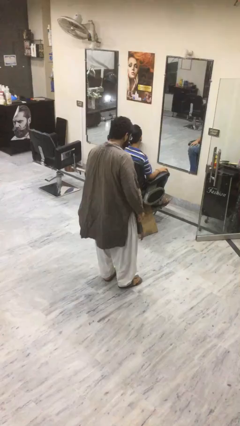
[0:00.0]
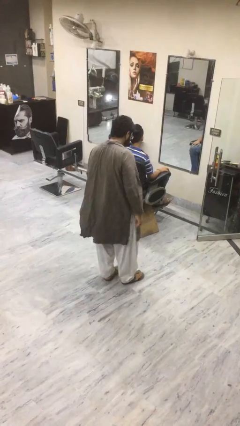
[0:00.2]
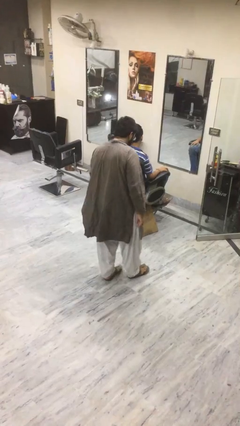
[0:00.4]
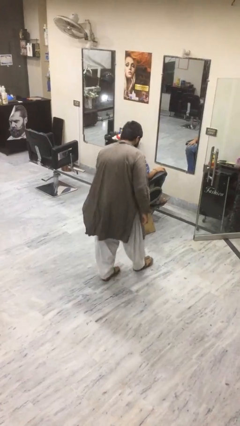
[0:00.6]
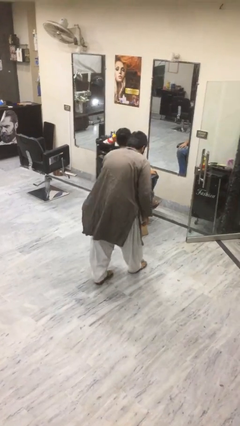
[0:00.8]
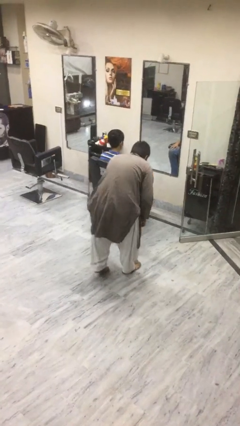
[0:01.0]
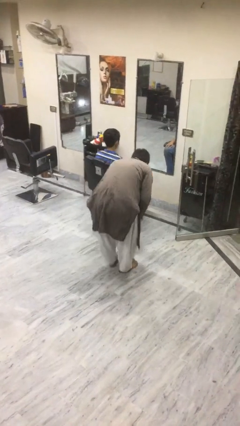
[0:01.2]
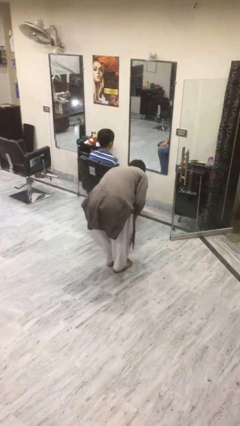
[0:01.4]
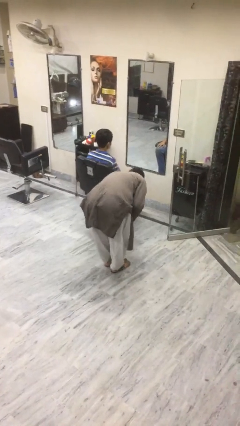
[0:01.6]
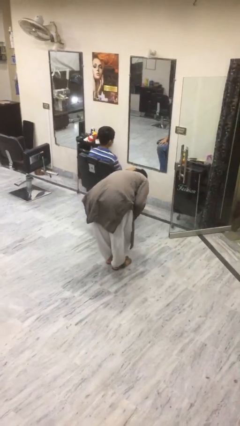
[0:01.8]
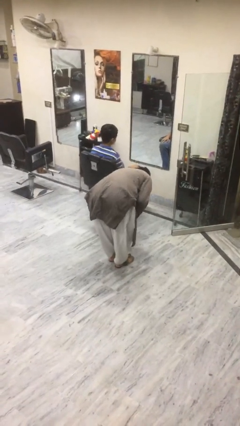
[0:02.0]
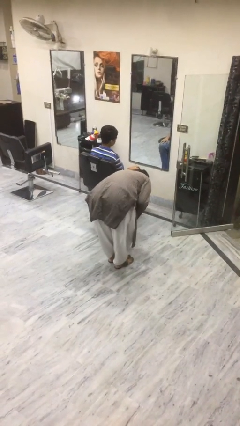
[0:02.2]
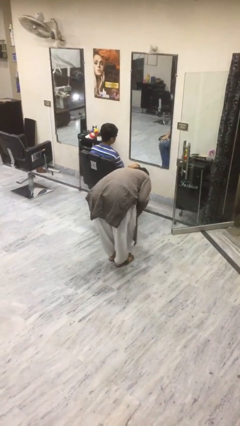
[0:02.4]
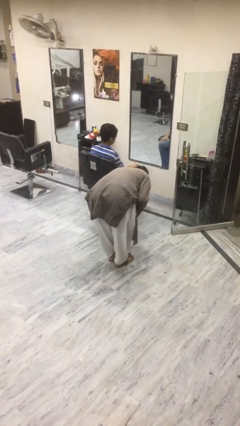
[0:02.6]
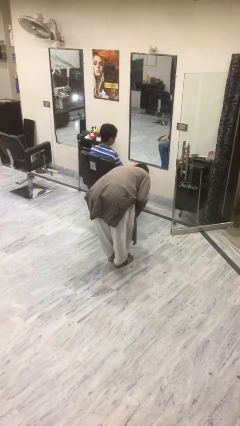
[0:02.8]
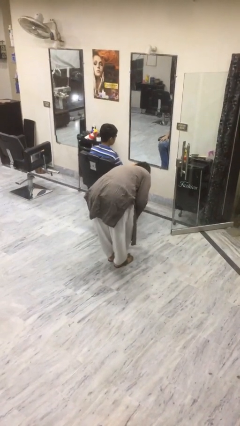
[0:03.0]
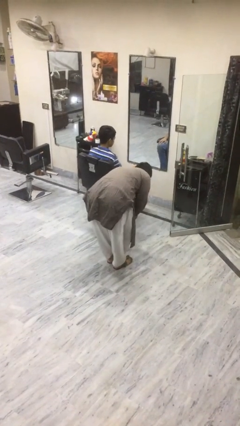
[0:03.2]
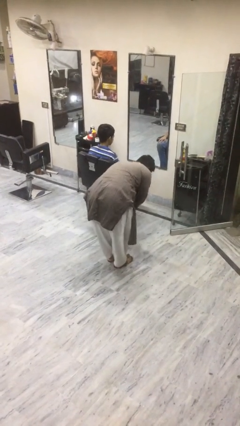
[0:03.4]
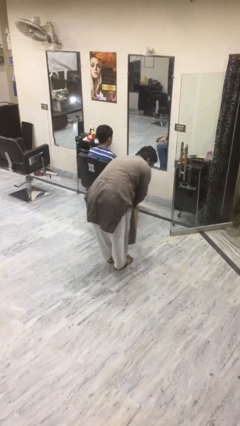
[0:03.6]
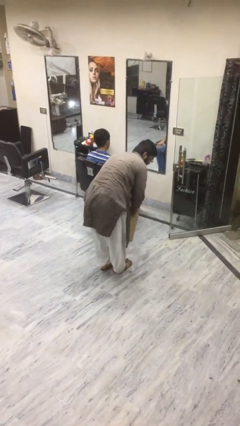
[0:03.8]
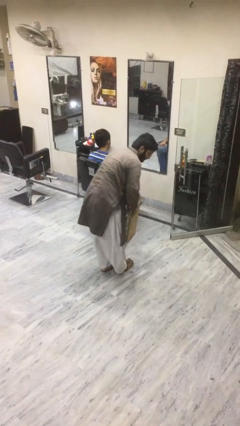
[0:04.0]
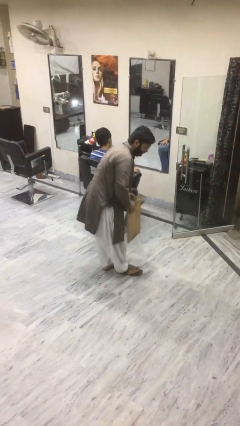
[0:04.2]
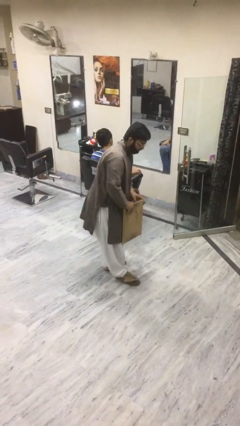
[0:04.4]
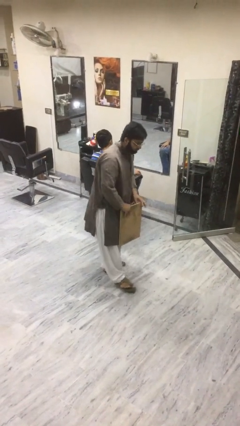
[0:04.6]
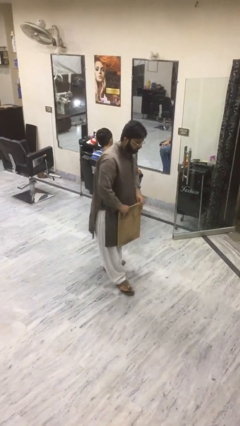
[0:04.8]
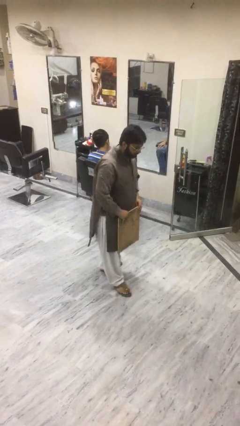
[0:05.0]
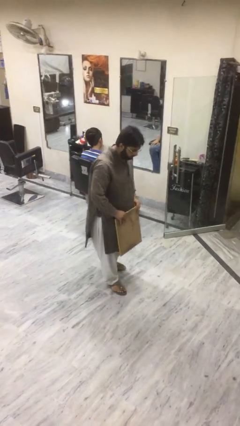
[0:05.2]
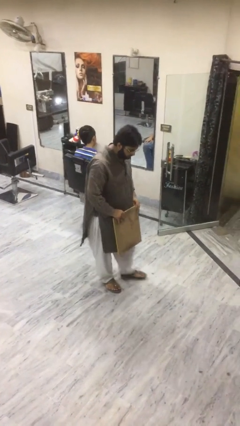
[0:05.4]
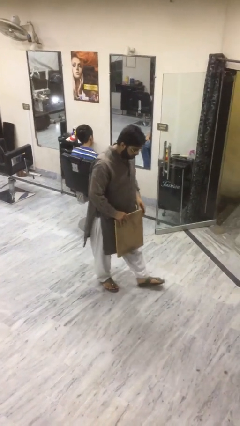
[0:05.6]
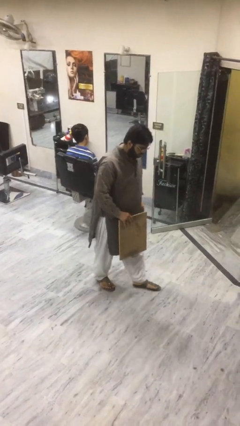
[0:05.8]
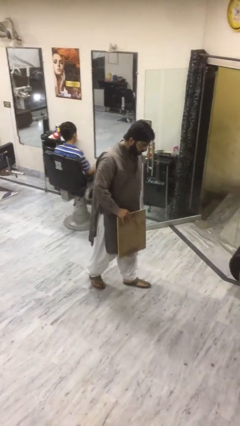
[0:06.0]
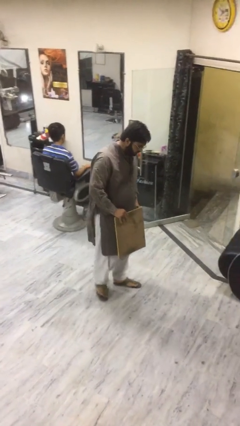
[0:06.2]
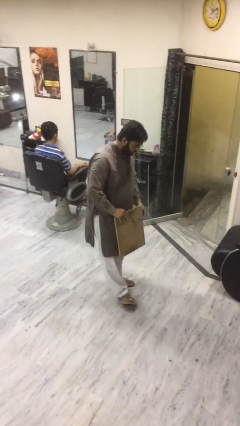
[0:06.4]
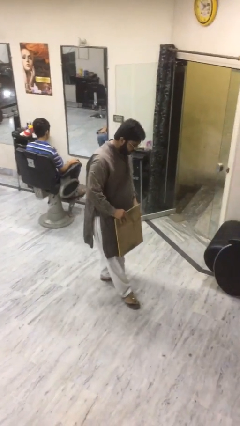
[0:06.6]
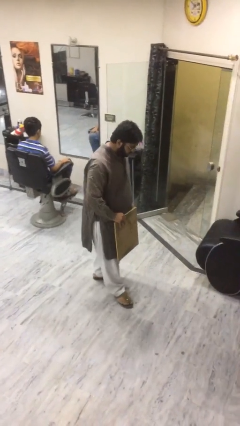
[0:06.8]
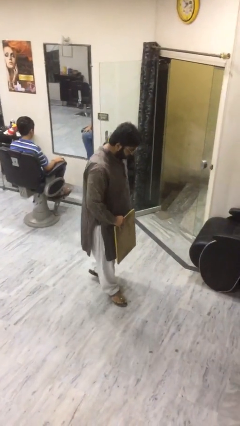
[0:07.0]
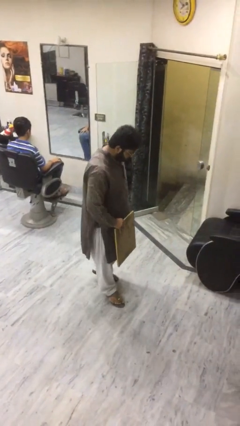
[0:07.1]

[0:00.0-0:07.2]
person steals object from person

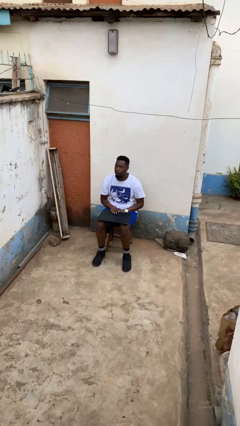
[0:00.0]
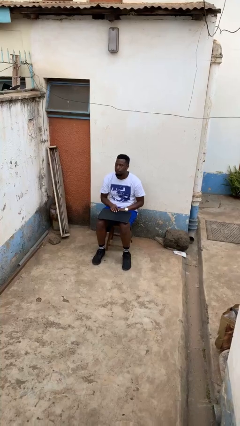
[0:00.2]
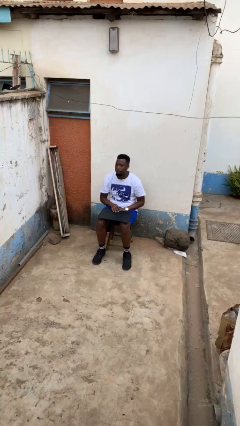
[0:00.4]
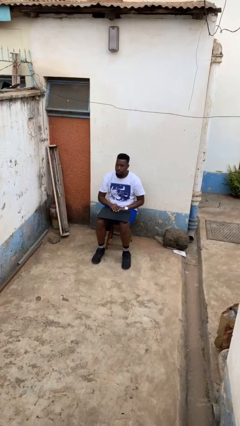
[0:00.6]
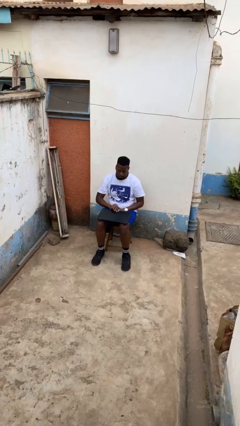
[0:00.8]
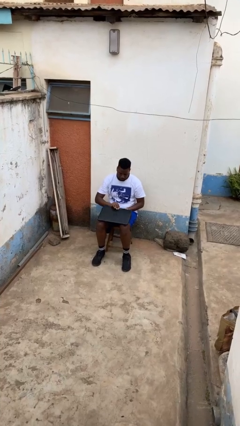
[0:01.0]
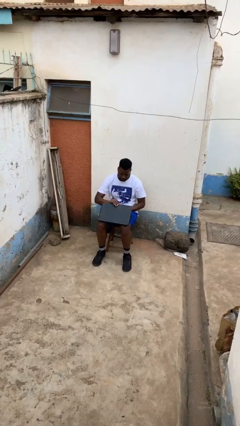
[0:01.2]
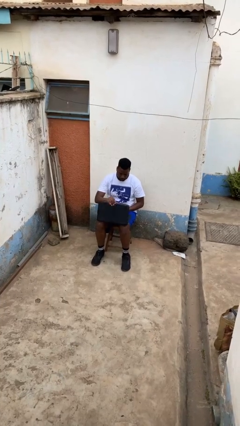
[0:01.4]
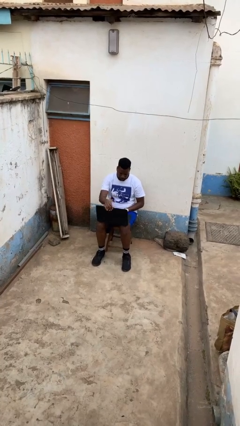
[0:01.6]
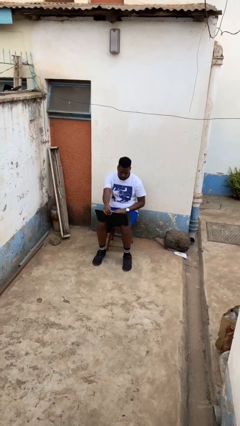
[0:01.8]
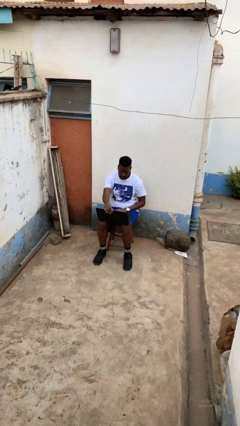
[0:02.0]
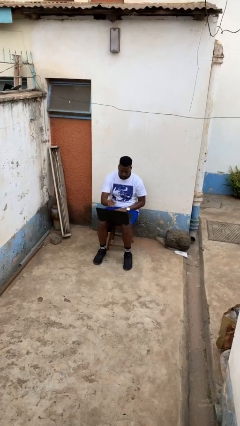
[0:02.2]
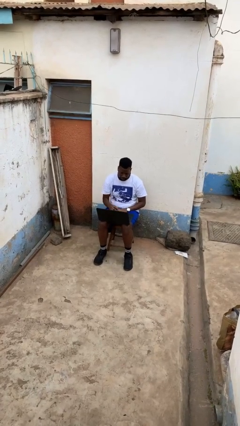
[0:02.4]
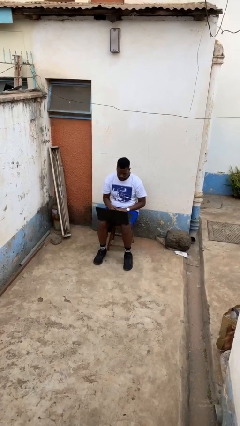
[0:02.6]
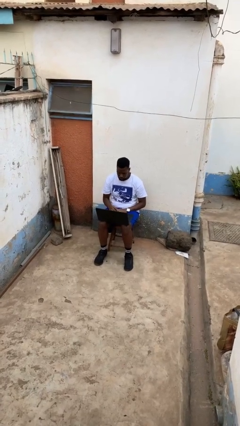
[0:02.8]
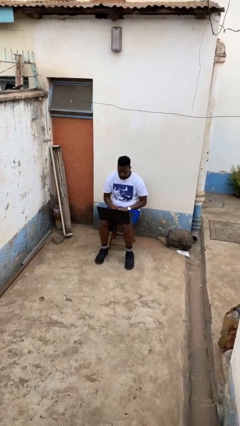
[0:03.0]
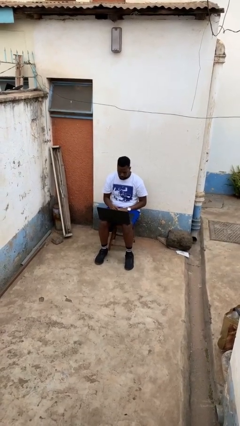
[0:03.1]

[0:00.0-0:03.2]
person opens laptop

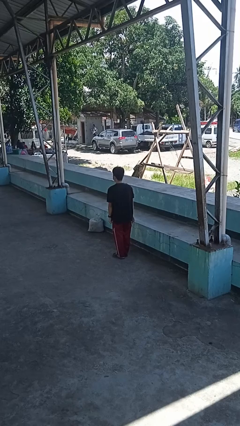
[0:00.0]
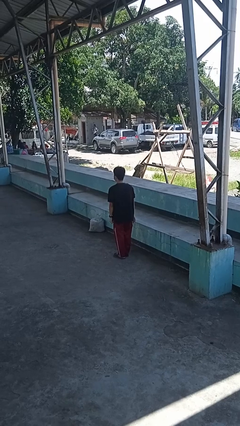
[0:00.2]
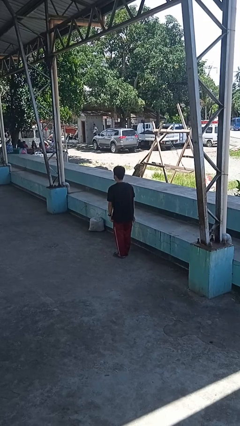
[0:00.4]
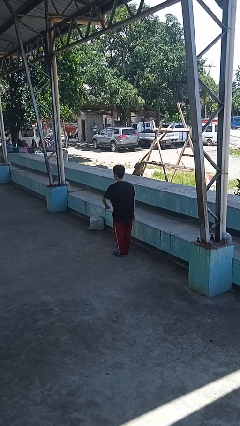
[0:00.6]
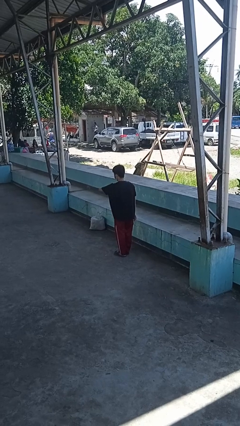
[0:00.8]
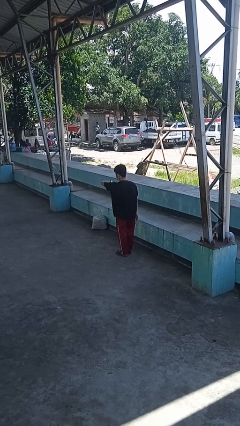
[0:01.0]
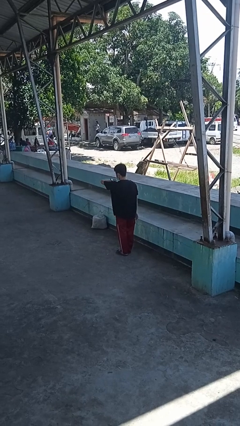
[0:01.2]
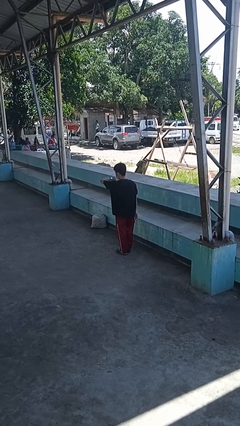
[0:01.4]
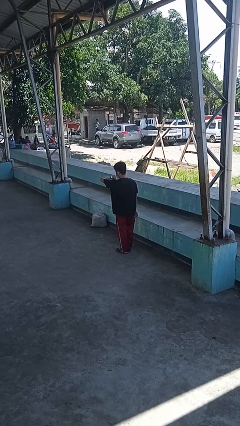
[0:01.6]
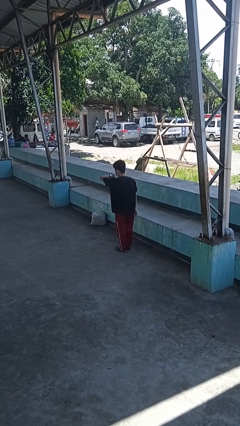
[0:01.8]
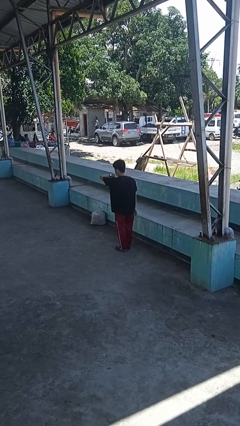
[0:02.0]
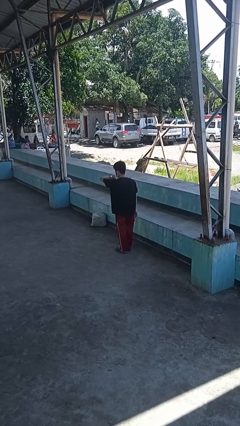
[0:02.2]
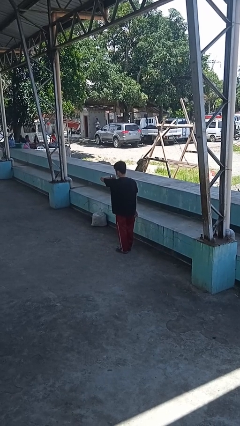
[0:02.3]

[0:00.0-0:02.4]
person looks at wristwatch

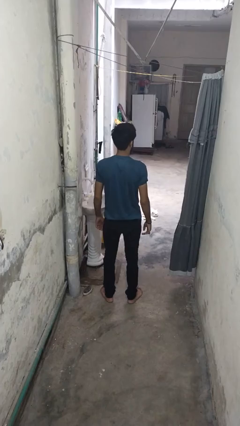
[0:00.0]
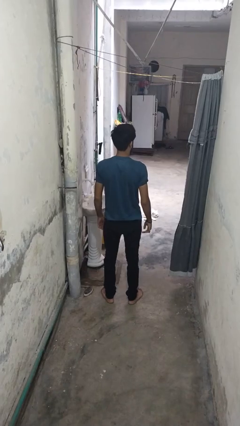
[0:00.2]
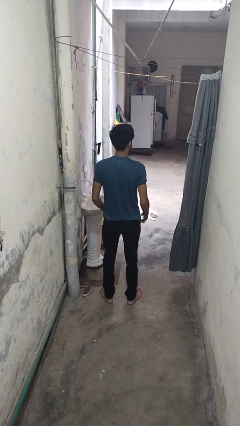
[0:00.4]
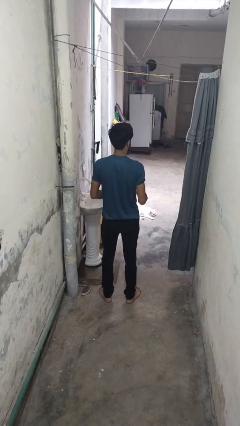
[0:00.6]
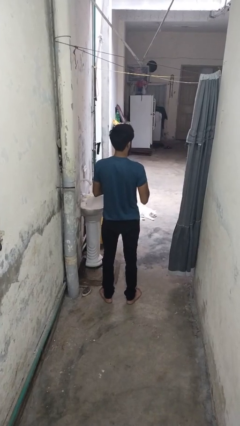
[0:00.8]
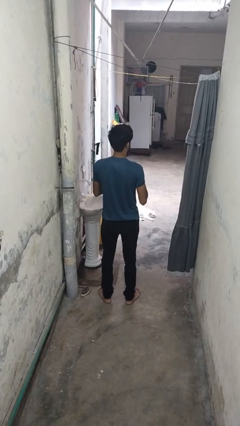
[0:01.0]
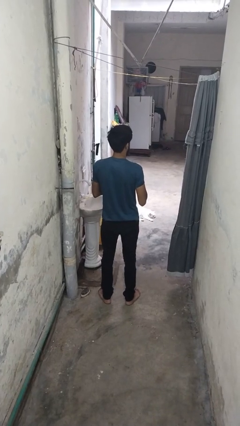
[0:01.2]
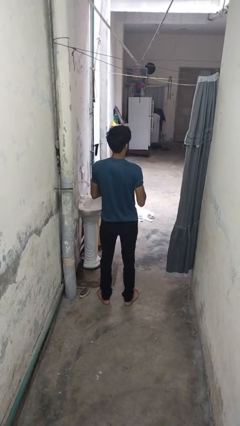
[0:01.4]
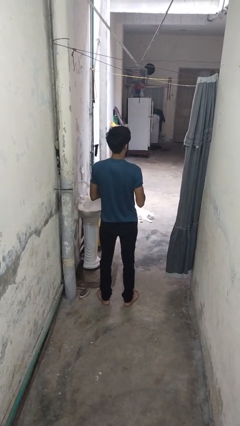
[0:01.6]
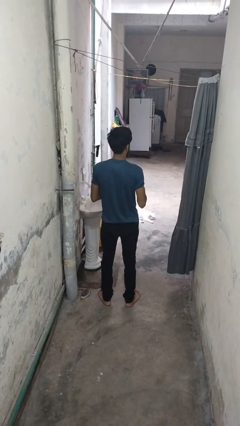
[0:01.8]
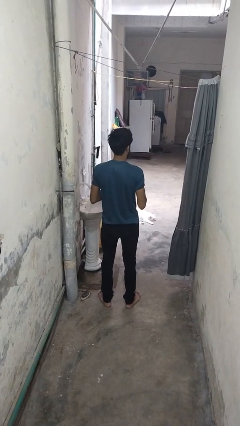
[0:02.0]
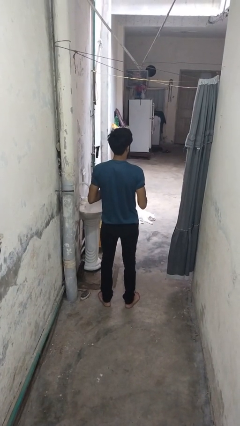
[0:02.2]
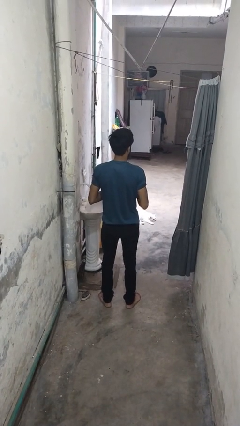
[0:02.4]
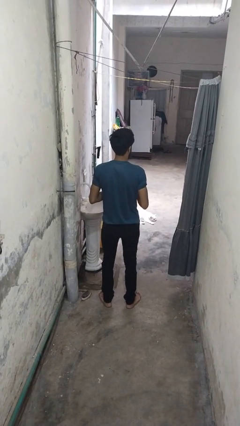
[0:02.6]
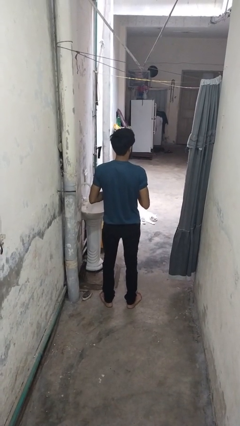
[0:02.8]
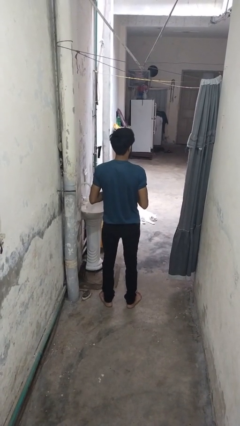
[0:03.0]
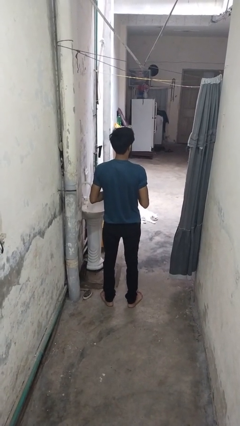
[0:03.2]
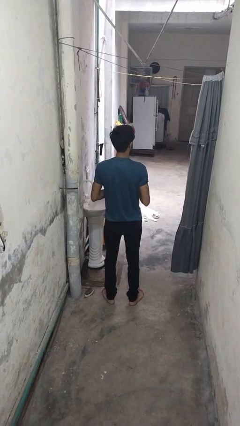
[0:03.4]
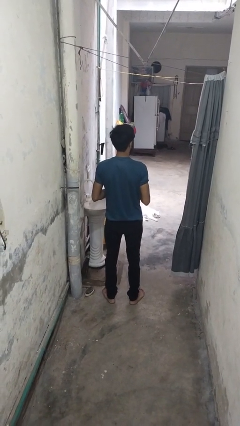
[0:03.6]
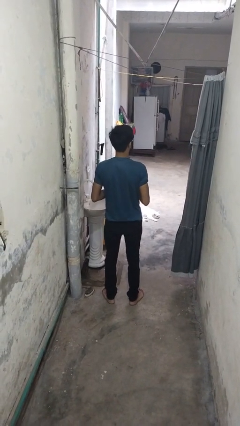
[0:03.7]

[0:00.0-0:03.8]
person takes off ring

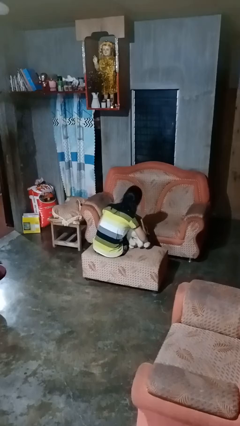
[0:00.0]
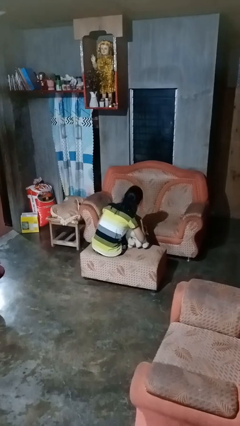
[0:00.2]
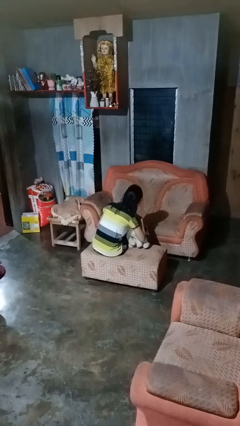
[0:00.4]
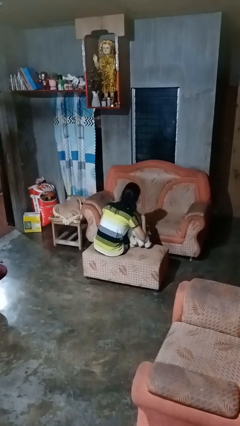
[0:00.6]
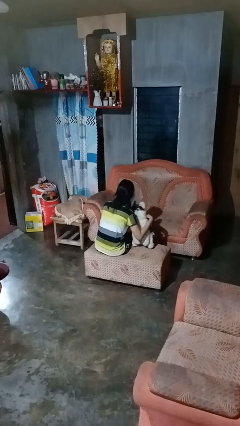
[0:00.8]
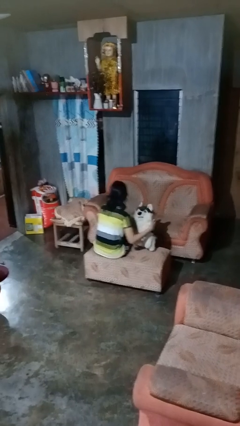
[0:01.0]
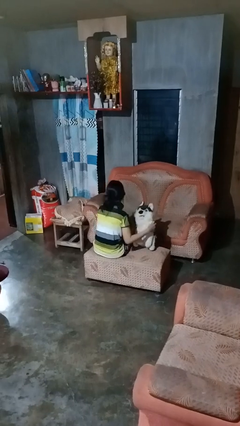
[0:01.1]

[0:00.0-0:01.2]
person hugs stuffed animal
